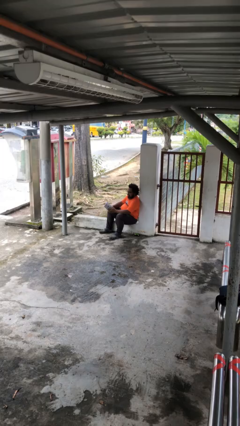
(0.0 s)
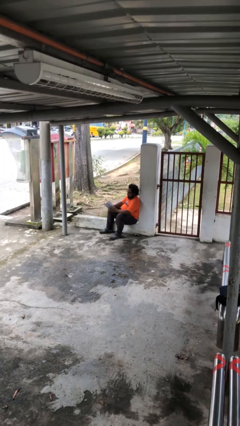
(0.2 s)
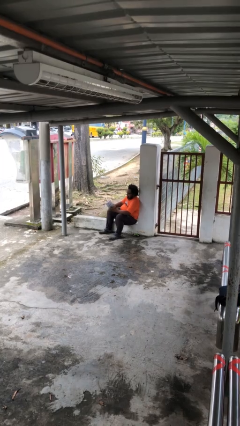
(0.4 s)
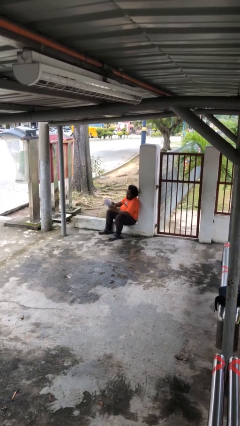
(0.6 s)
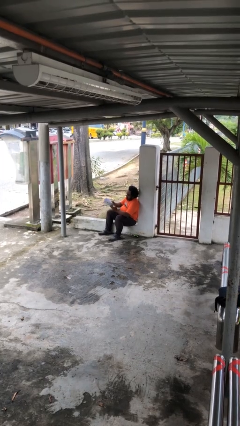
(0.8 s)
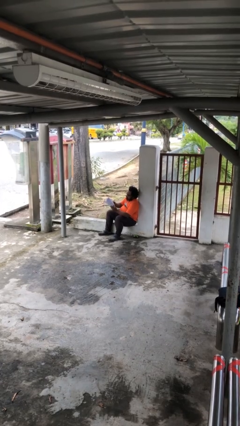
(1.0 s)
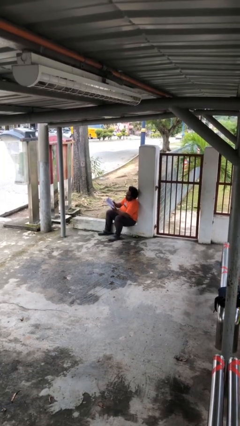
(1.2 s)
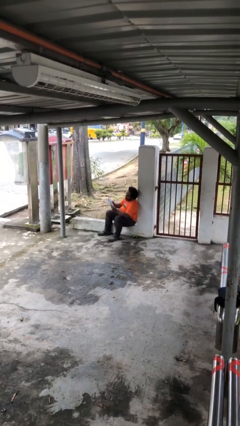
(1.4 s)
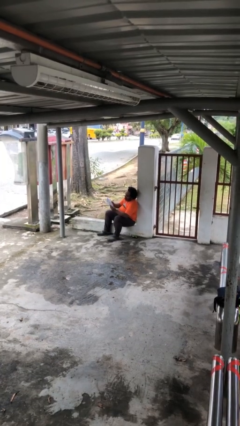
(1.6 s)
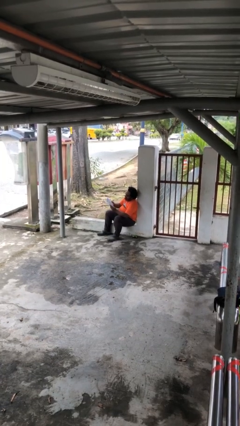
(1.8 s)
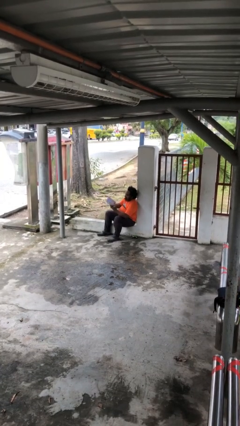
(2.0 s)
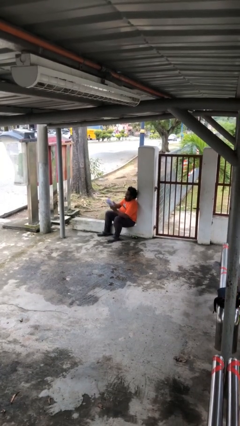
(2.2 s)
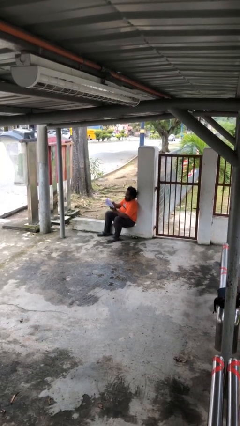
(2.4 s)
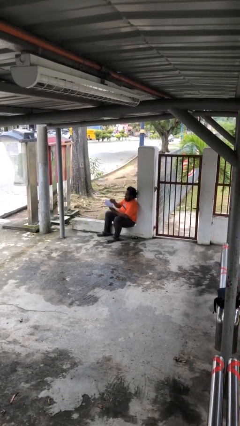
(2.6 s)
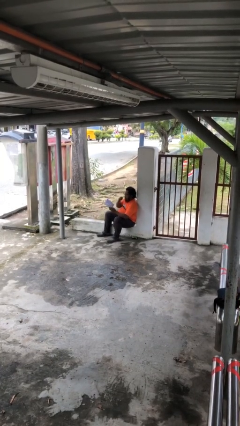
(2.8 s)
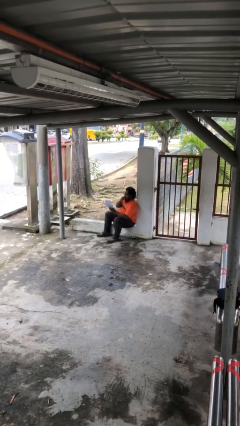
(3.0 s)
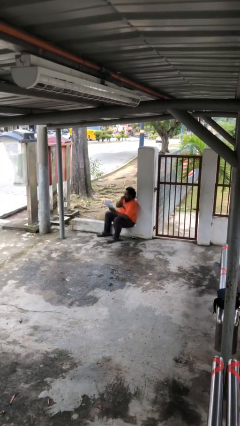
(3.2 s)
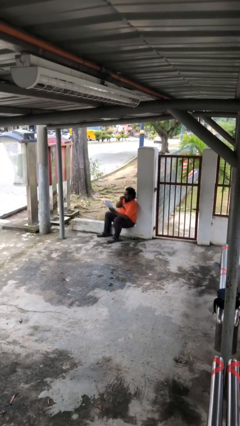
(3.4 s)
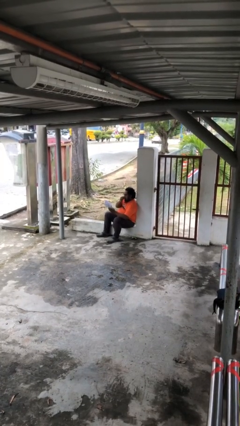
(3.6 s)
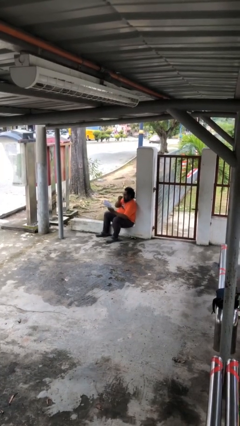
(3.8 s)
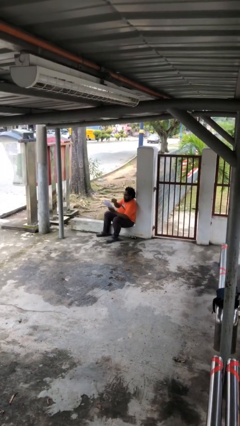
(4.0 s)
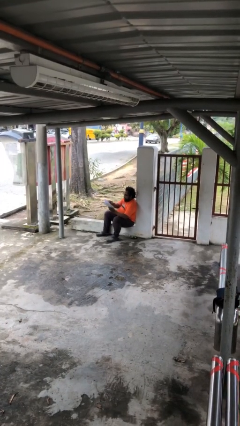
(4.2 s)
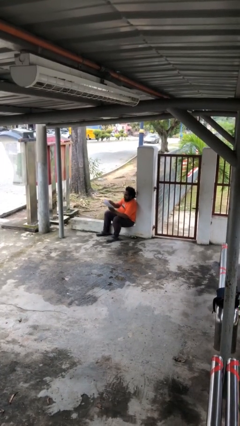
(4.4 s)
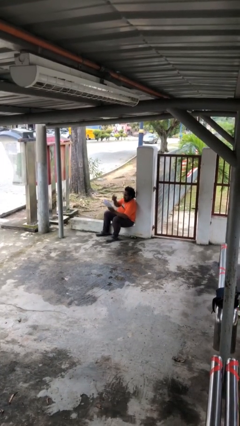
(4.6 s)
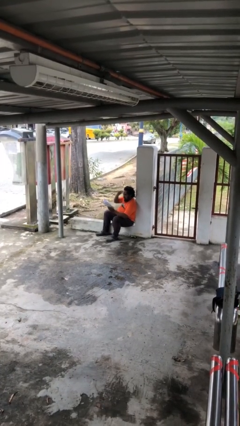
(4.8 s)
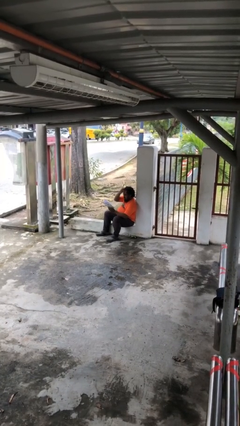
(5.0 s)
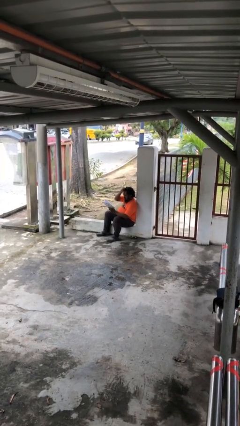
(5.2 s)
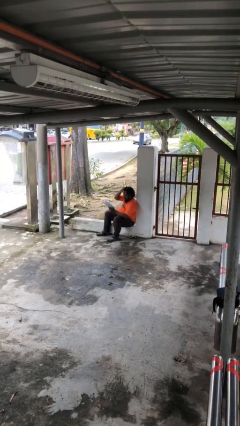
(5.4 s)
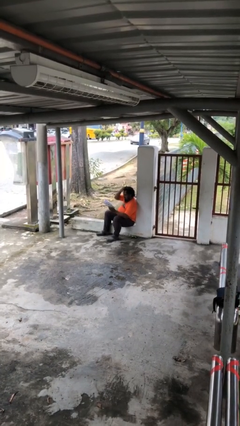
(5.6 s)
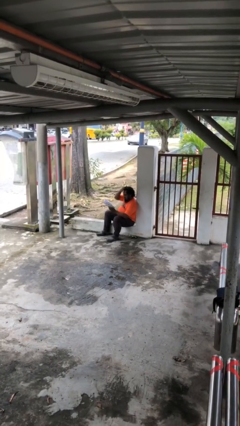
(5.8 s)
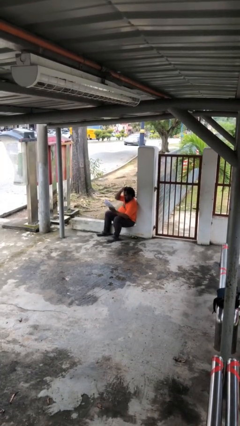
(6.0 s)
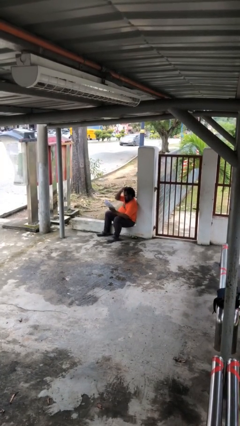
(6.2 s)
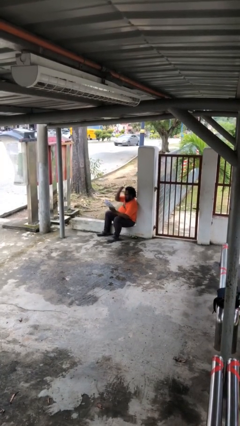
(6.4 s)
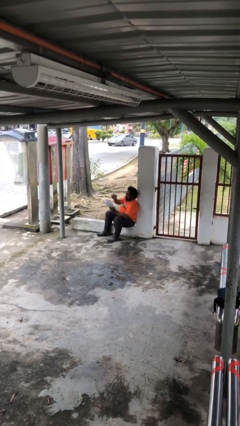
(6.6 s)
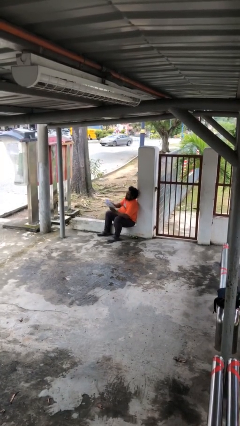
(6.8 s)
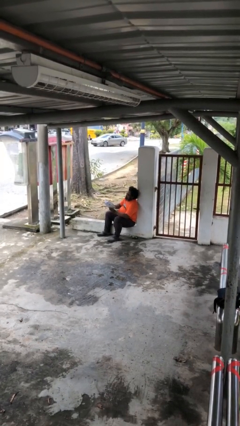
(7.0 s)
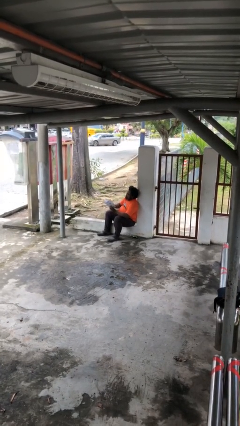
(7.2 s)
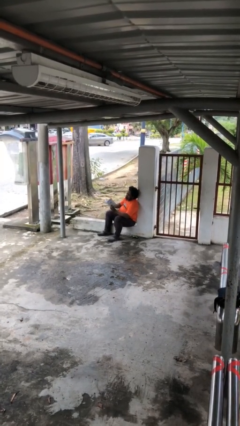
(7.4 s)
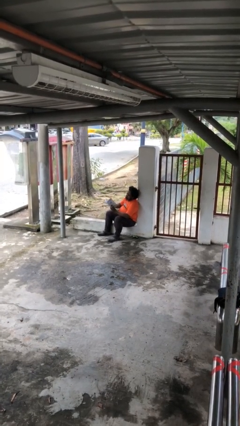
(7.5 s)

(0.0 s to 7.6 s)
person reads document

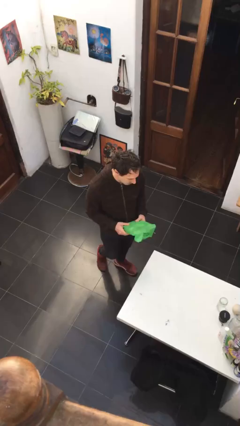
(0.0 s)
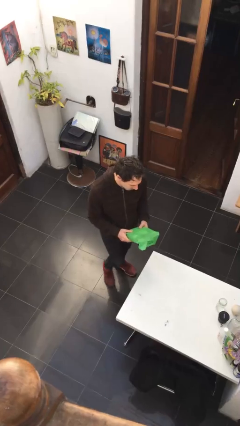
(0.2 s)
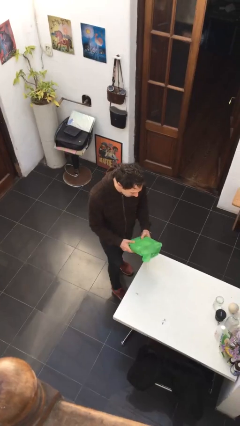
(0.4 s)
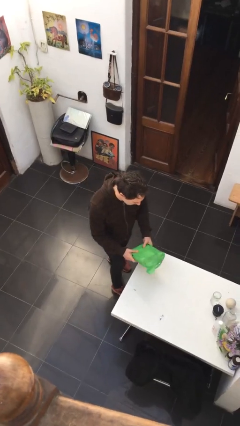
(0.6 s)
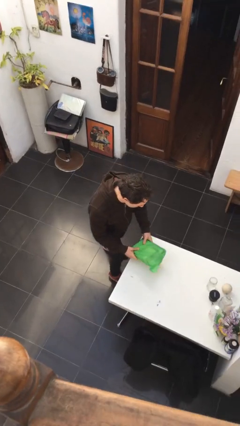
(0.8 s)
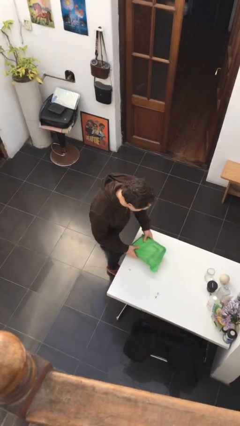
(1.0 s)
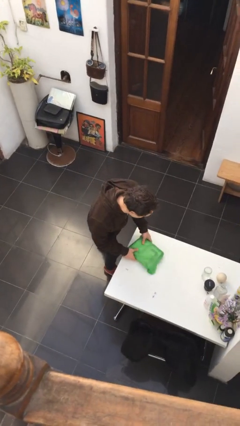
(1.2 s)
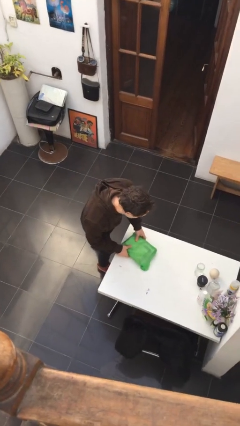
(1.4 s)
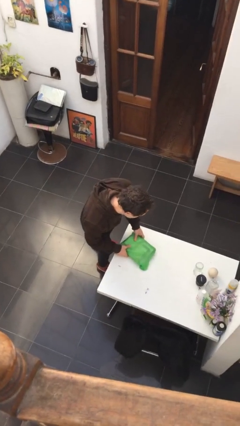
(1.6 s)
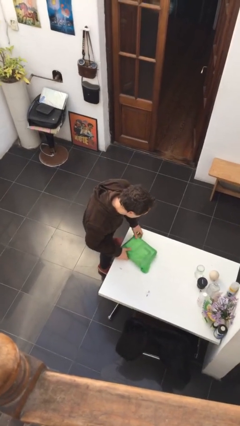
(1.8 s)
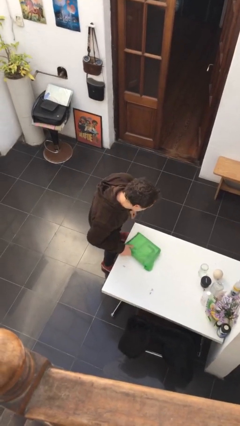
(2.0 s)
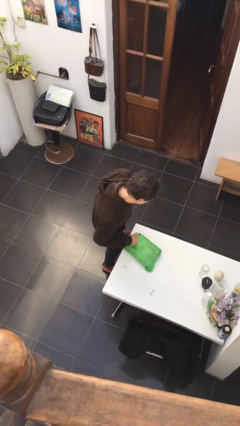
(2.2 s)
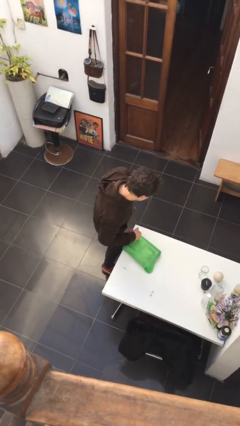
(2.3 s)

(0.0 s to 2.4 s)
person puts down object on table

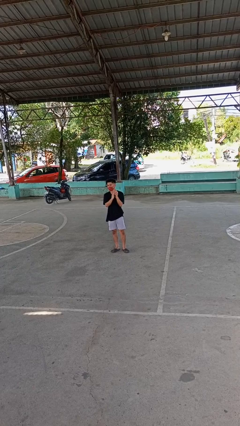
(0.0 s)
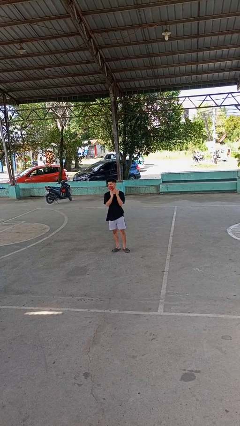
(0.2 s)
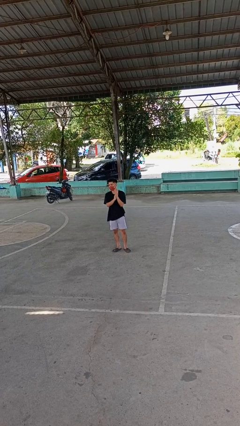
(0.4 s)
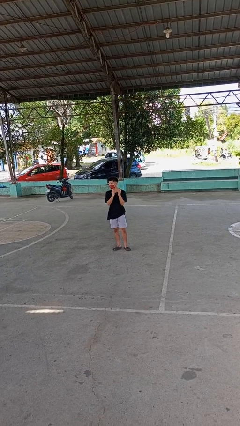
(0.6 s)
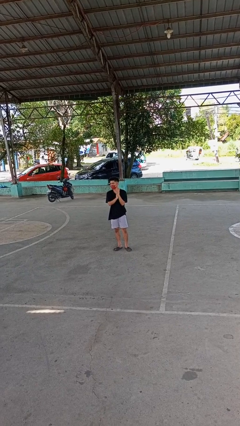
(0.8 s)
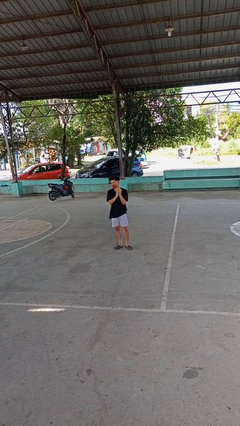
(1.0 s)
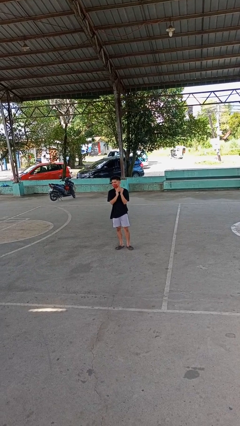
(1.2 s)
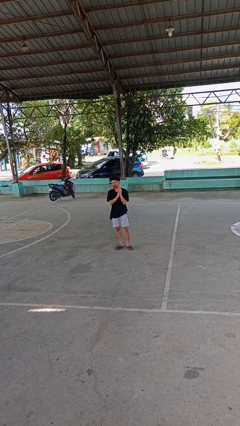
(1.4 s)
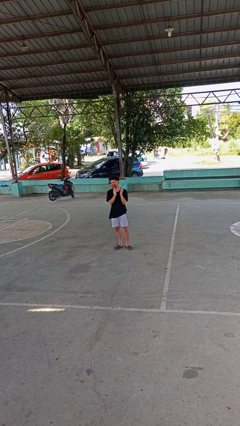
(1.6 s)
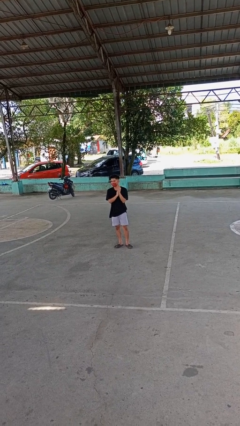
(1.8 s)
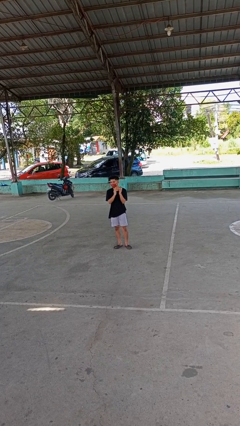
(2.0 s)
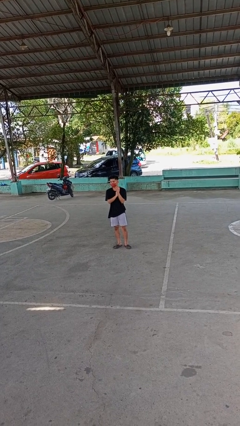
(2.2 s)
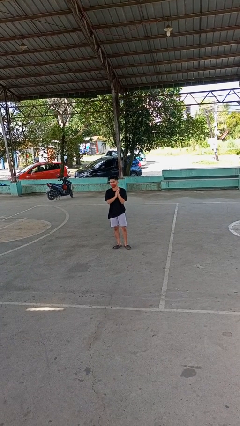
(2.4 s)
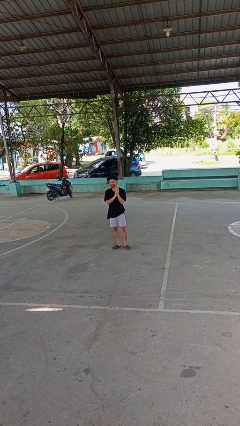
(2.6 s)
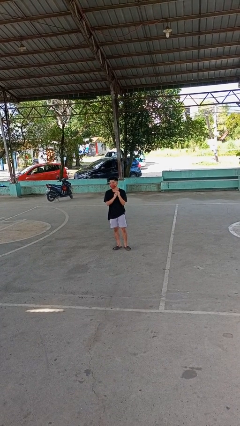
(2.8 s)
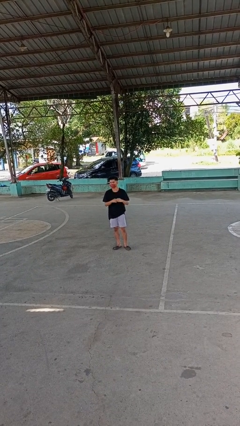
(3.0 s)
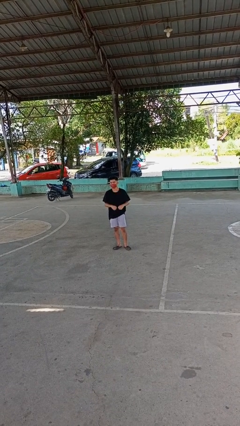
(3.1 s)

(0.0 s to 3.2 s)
person claps hands

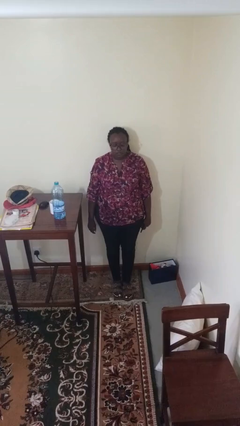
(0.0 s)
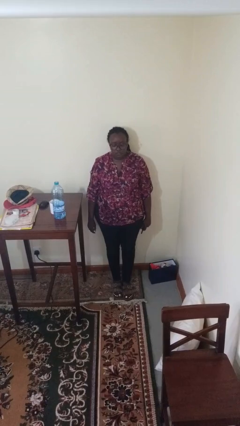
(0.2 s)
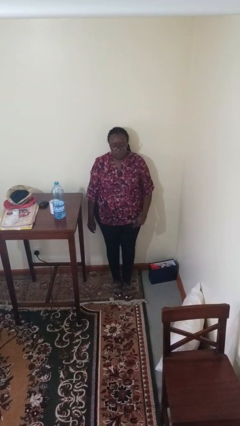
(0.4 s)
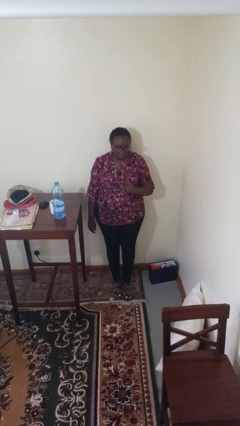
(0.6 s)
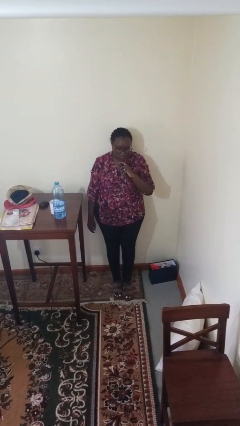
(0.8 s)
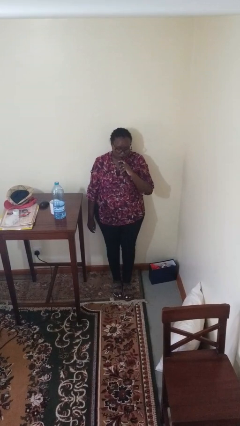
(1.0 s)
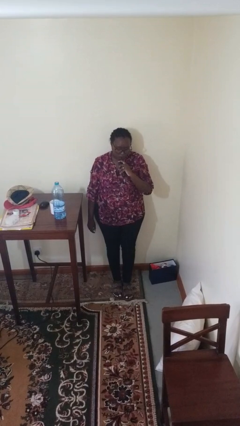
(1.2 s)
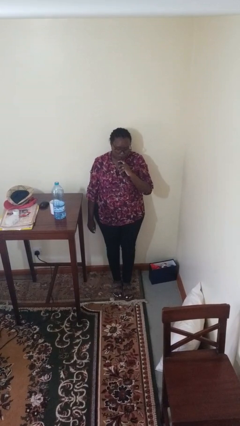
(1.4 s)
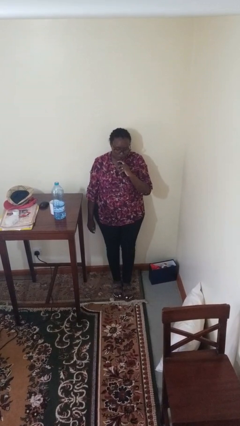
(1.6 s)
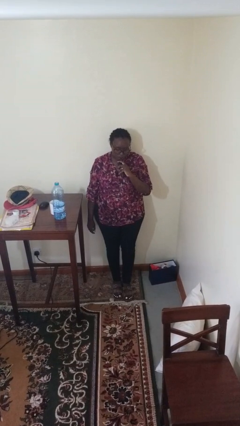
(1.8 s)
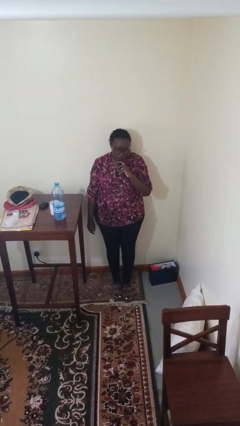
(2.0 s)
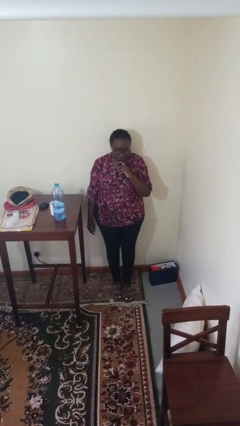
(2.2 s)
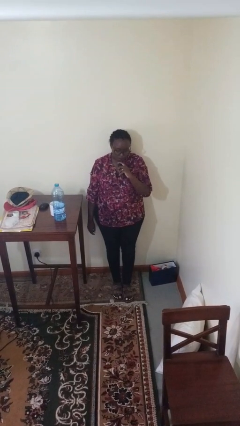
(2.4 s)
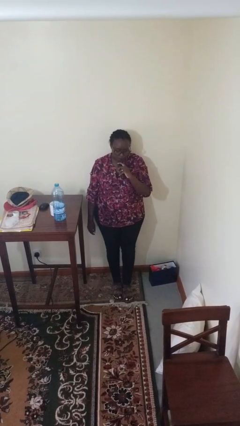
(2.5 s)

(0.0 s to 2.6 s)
person vapes

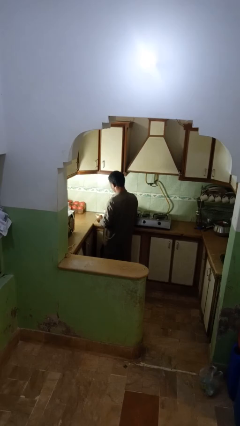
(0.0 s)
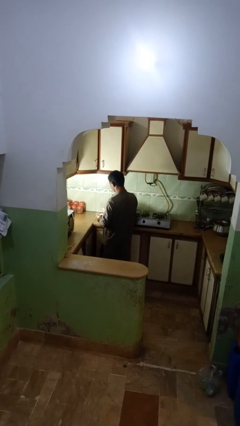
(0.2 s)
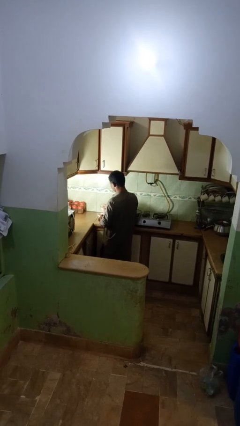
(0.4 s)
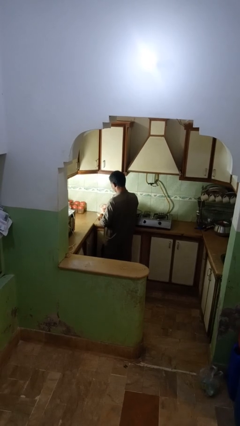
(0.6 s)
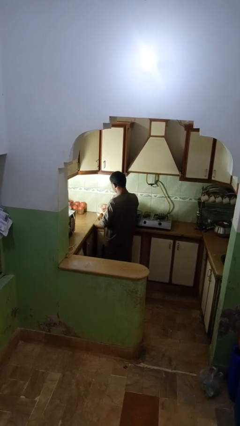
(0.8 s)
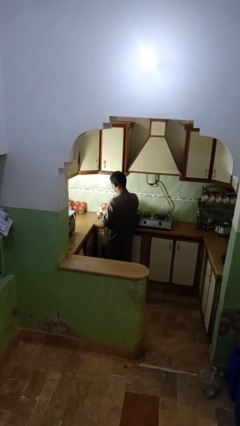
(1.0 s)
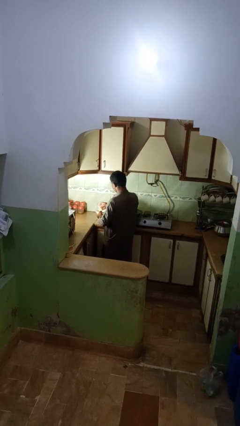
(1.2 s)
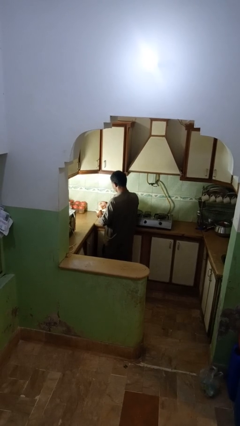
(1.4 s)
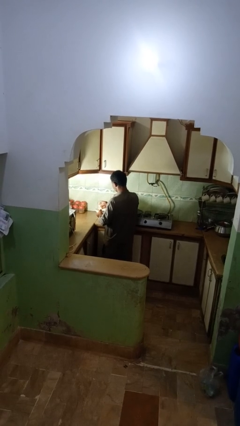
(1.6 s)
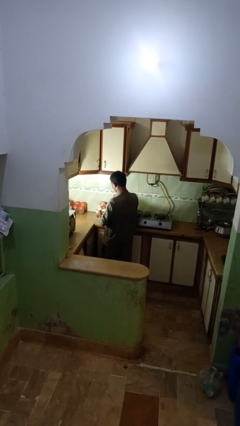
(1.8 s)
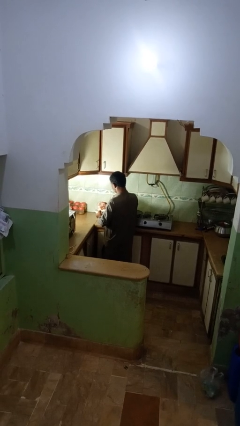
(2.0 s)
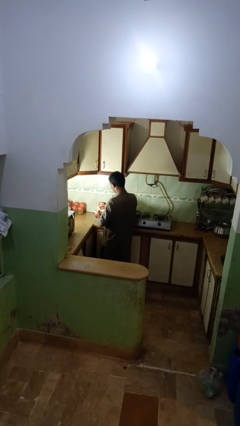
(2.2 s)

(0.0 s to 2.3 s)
person pours into bowl
